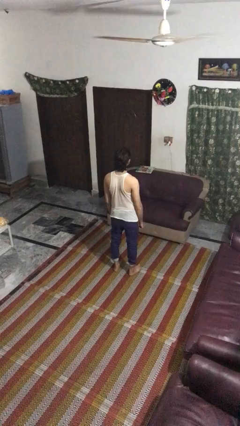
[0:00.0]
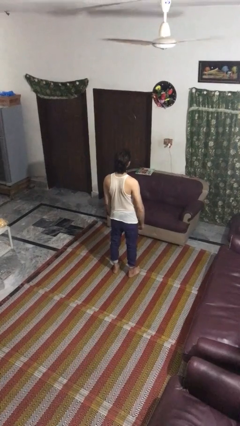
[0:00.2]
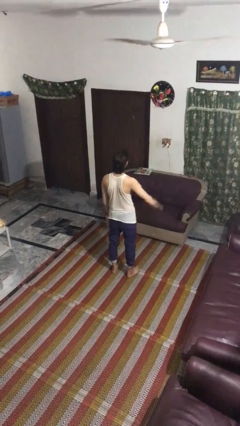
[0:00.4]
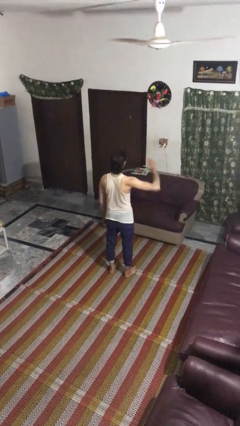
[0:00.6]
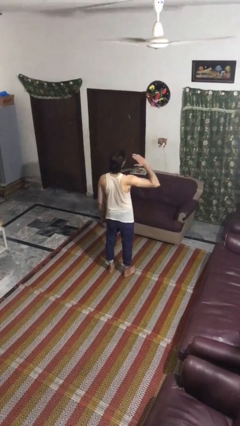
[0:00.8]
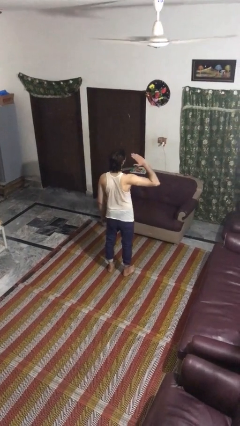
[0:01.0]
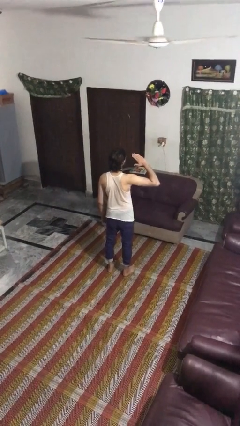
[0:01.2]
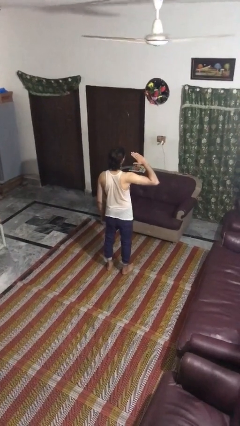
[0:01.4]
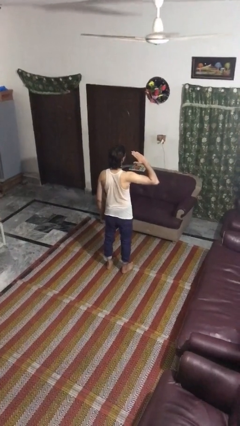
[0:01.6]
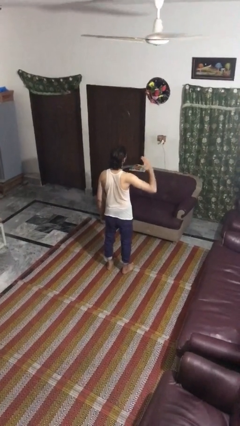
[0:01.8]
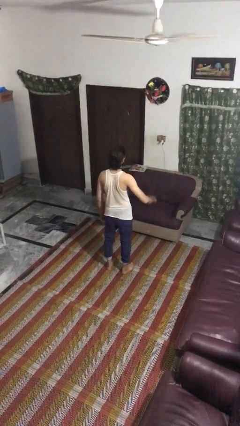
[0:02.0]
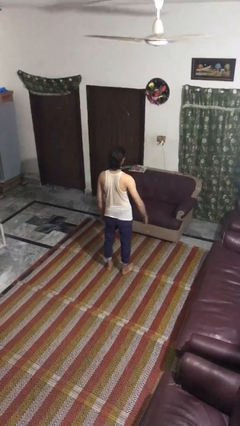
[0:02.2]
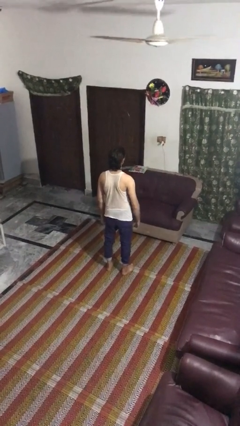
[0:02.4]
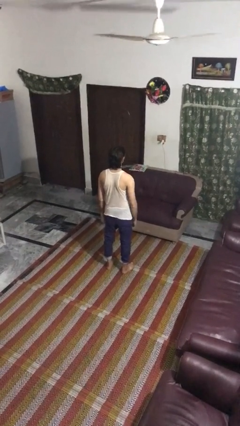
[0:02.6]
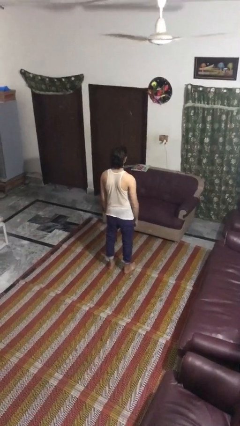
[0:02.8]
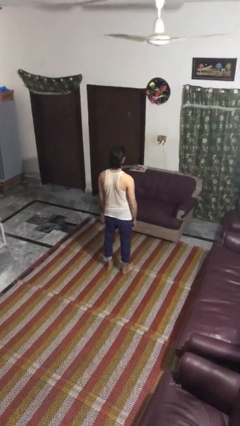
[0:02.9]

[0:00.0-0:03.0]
person salutes

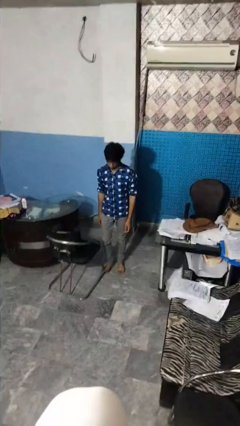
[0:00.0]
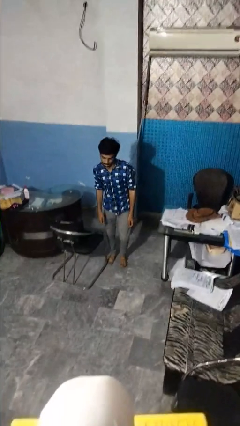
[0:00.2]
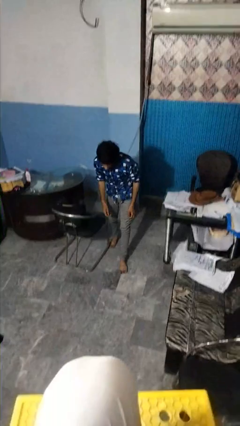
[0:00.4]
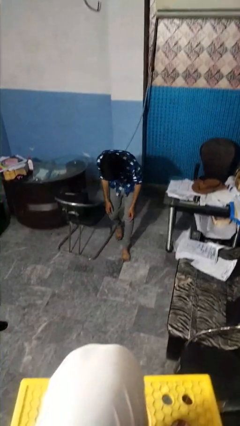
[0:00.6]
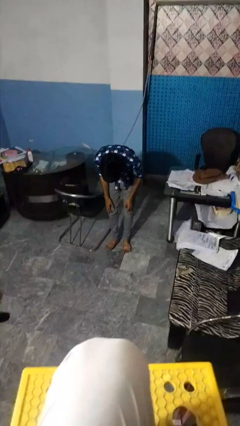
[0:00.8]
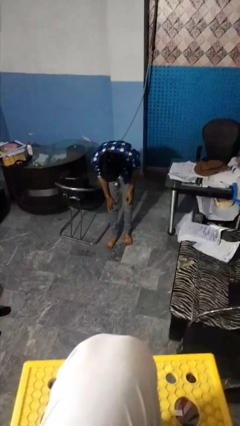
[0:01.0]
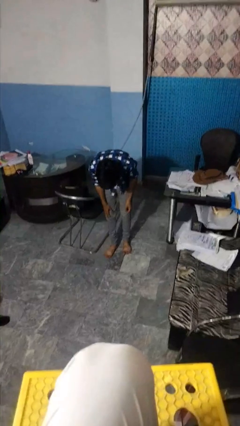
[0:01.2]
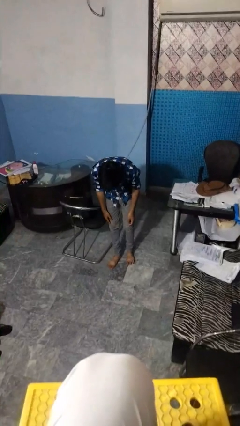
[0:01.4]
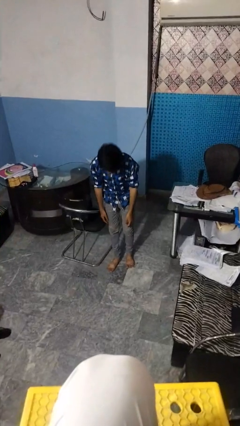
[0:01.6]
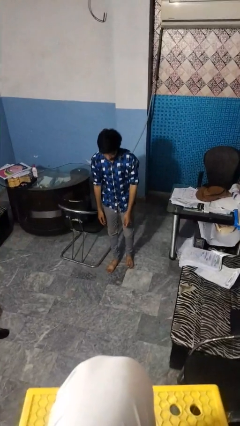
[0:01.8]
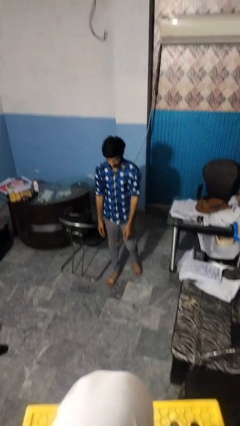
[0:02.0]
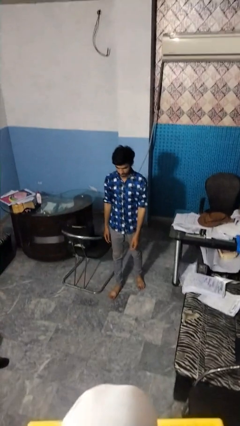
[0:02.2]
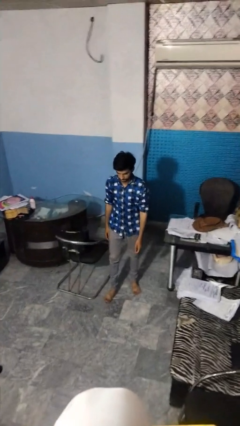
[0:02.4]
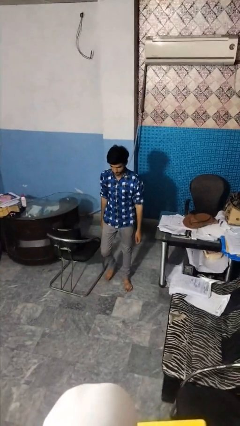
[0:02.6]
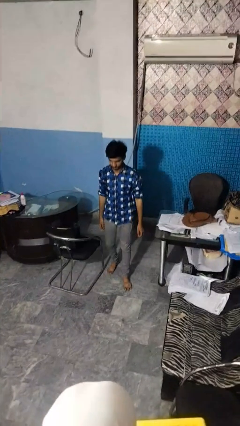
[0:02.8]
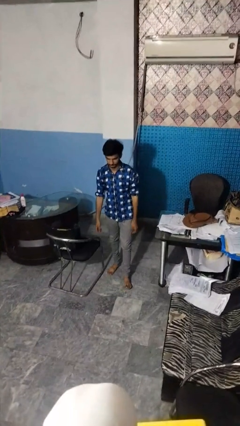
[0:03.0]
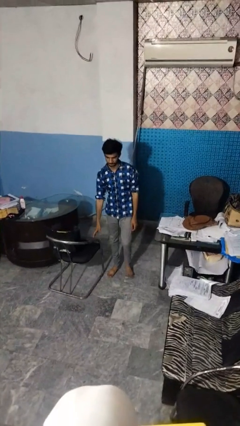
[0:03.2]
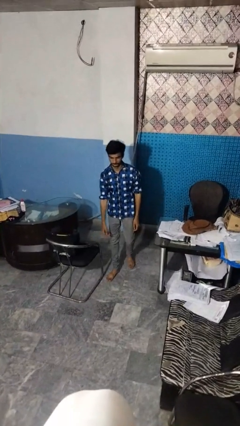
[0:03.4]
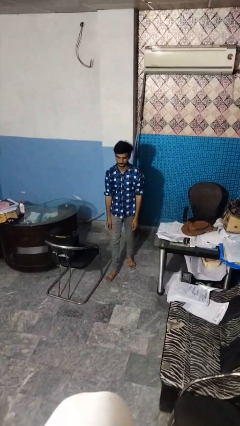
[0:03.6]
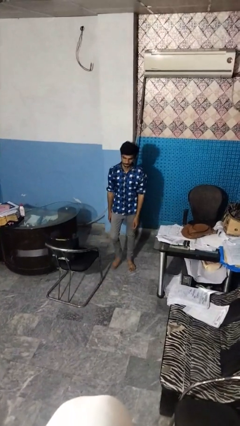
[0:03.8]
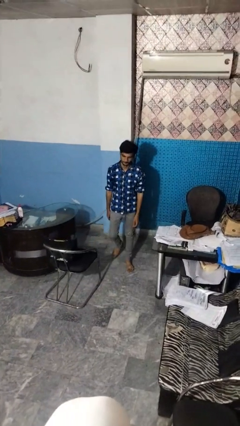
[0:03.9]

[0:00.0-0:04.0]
person stubs toe

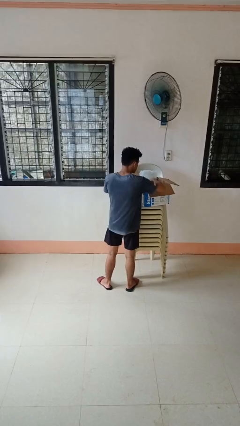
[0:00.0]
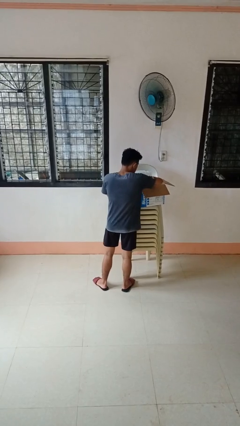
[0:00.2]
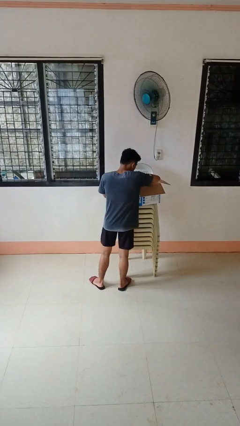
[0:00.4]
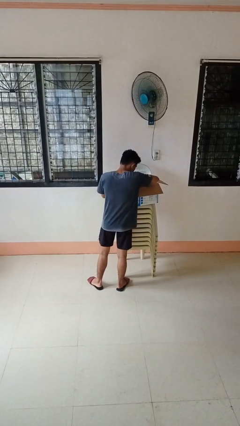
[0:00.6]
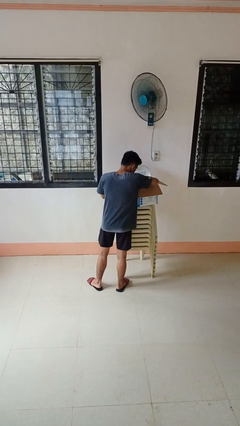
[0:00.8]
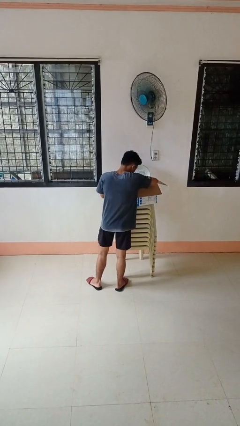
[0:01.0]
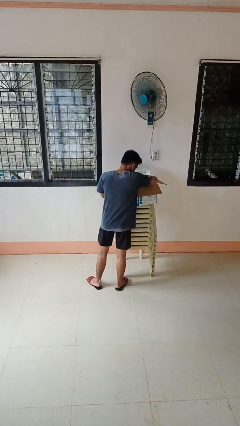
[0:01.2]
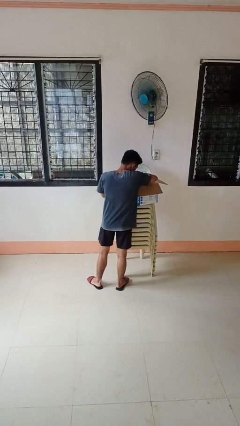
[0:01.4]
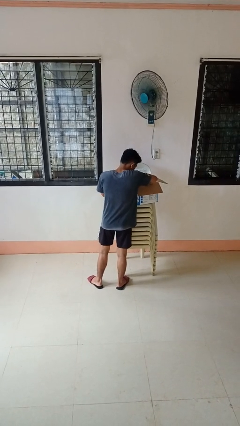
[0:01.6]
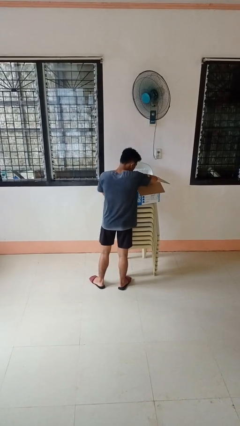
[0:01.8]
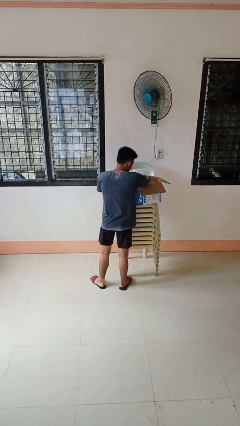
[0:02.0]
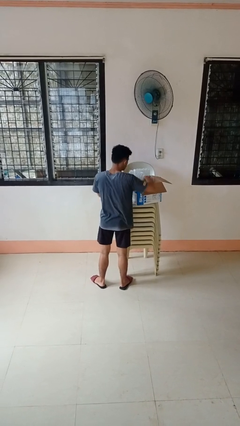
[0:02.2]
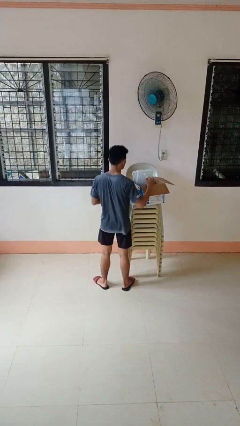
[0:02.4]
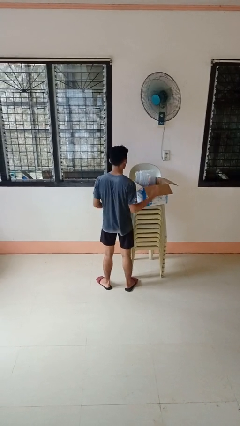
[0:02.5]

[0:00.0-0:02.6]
person searches in box

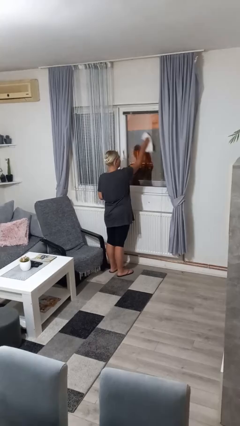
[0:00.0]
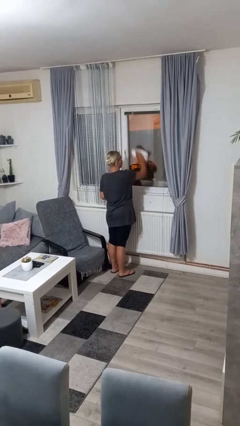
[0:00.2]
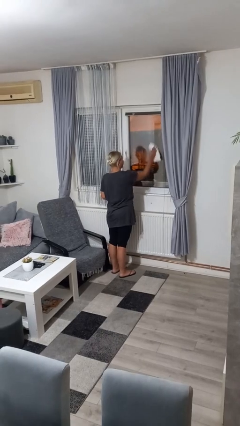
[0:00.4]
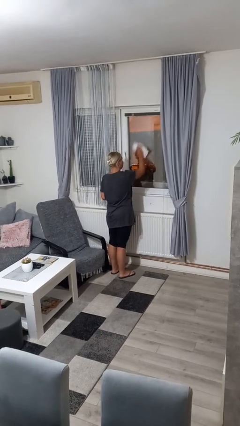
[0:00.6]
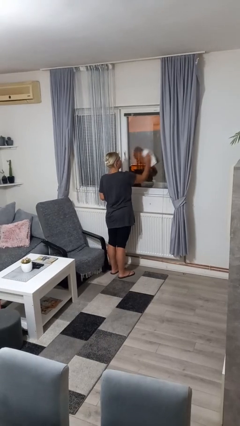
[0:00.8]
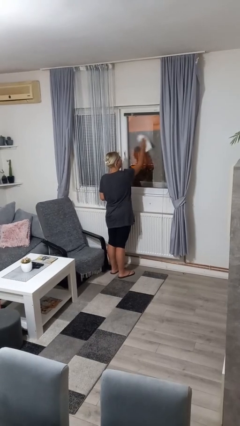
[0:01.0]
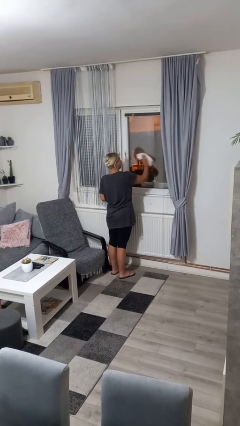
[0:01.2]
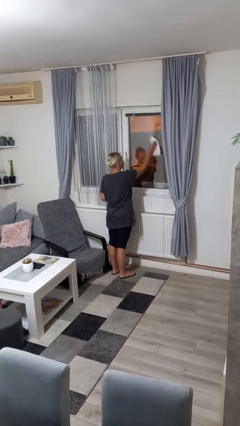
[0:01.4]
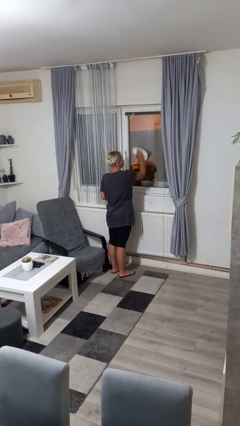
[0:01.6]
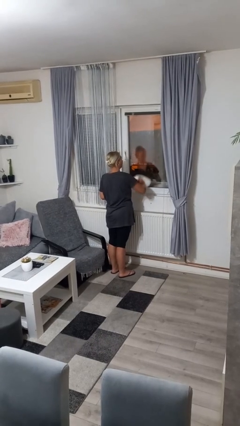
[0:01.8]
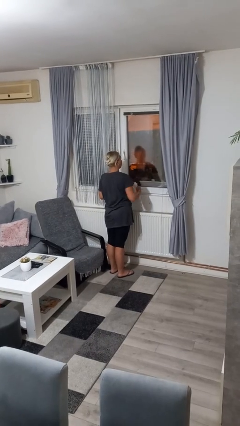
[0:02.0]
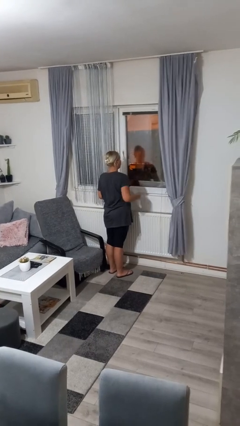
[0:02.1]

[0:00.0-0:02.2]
person washes window

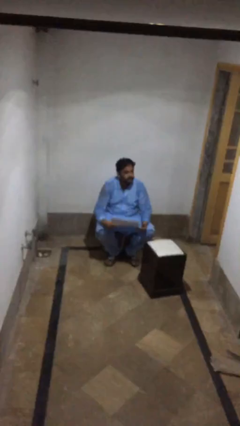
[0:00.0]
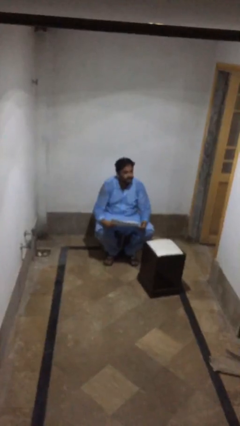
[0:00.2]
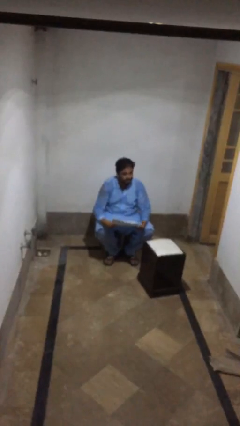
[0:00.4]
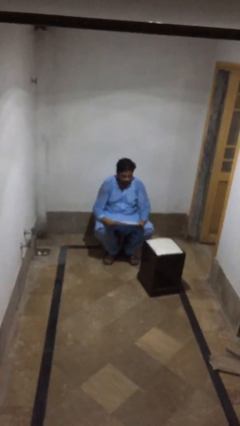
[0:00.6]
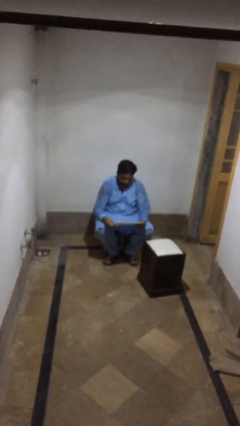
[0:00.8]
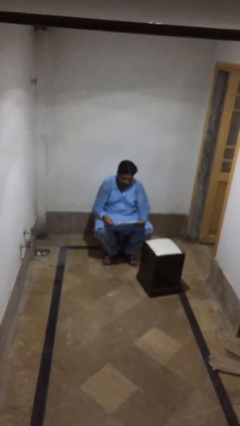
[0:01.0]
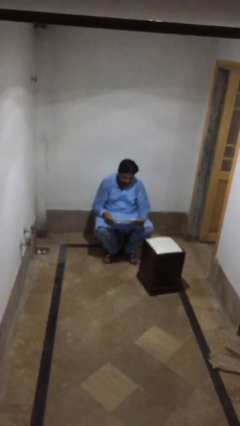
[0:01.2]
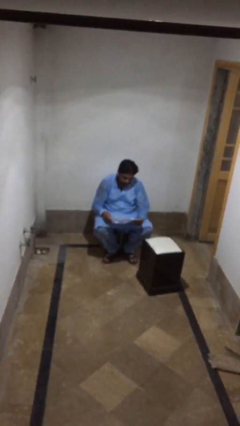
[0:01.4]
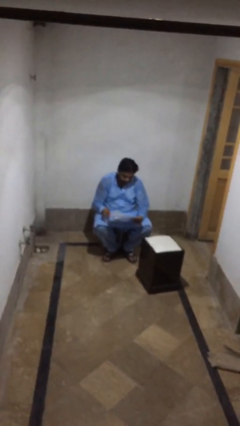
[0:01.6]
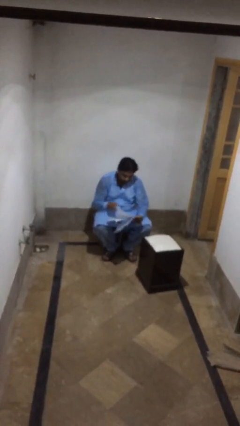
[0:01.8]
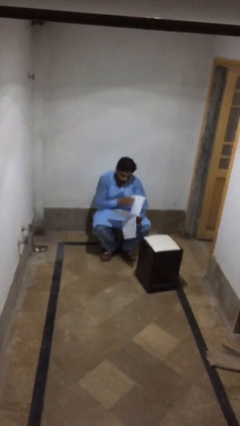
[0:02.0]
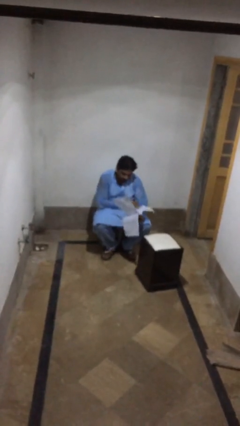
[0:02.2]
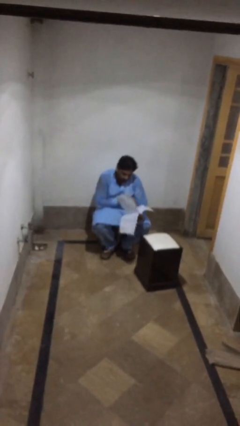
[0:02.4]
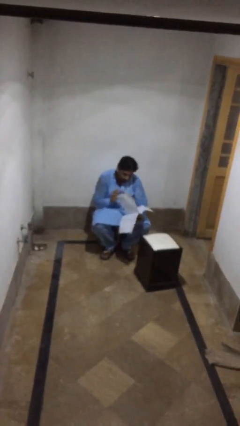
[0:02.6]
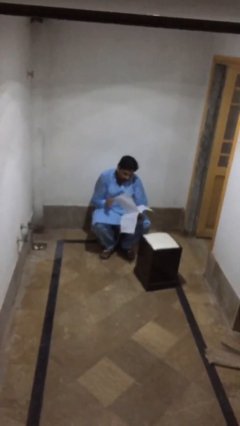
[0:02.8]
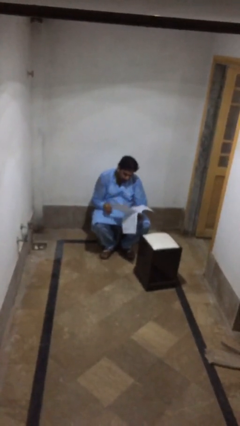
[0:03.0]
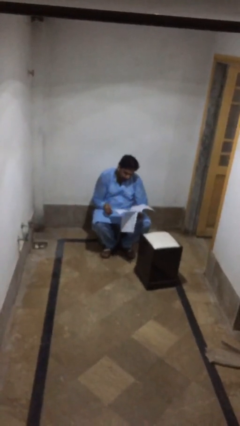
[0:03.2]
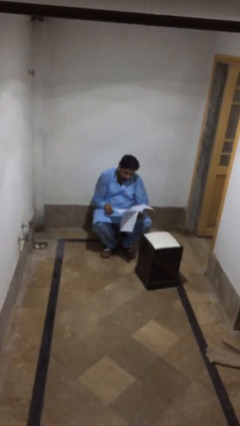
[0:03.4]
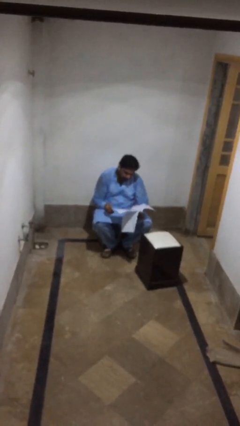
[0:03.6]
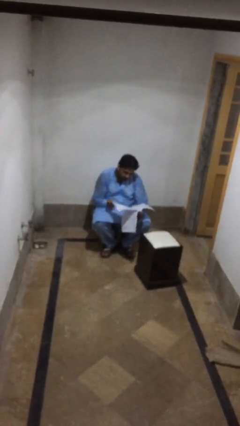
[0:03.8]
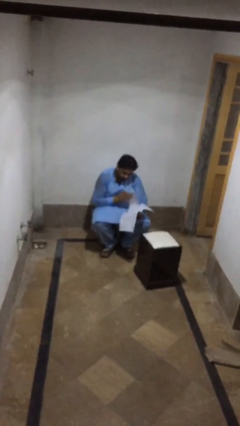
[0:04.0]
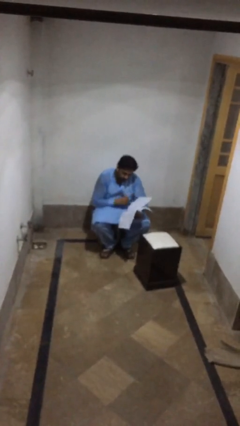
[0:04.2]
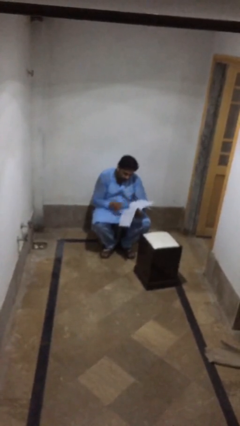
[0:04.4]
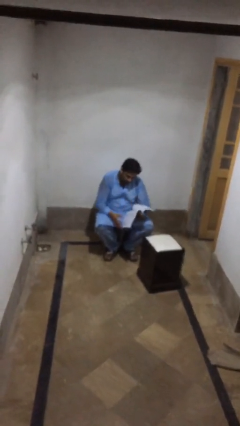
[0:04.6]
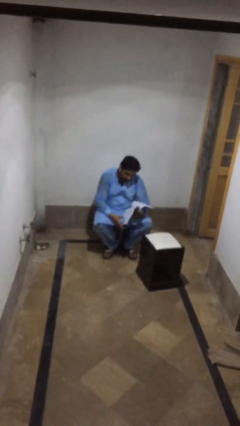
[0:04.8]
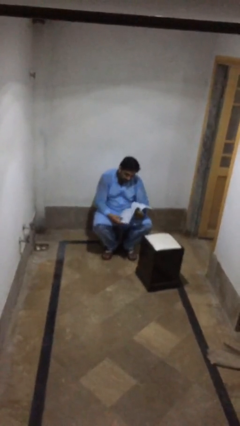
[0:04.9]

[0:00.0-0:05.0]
person reads document

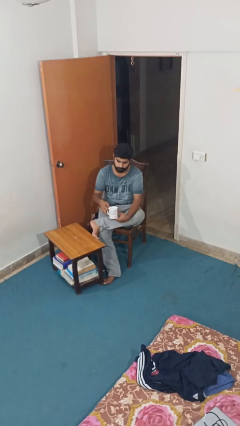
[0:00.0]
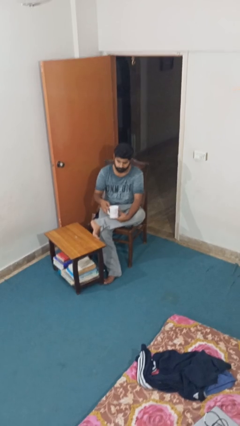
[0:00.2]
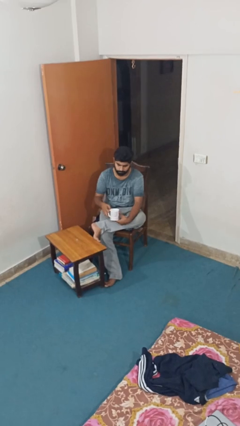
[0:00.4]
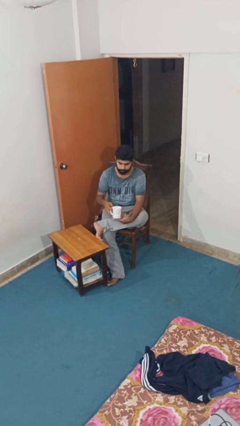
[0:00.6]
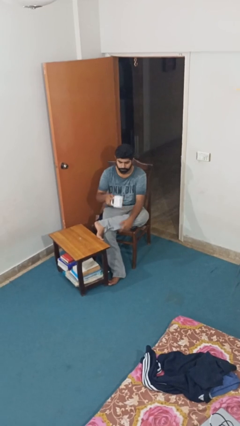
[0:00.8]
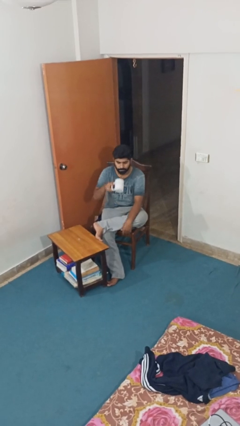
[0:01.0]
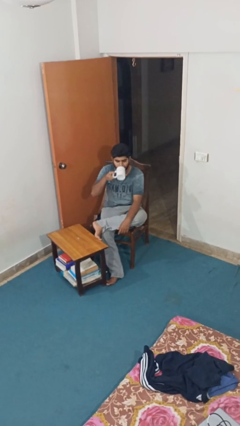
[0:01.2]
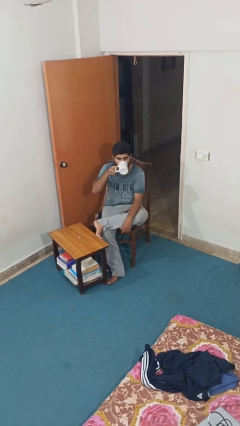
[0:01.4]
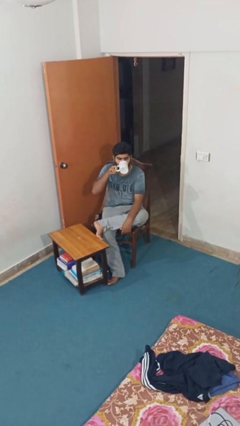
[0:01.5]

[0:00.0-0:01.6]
person drinks from mug
